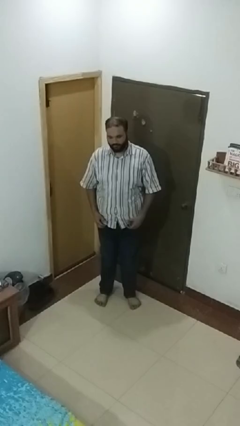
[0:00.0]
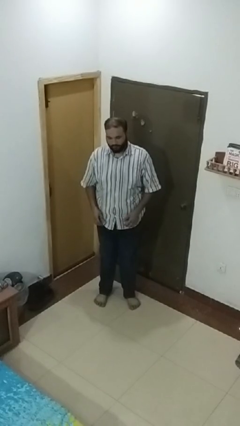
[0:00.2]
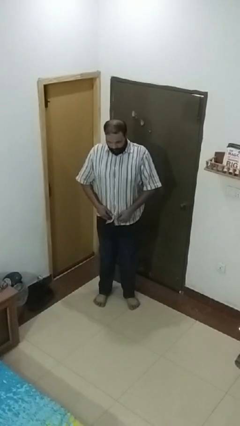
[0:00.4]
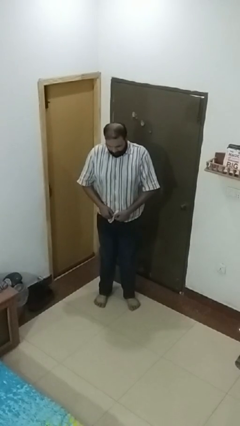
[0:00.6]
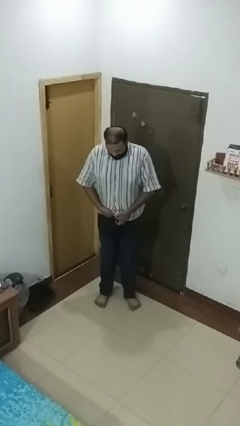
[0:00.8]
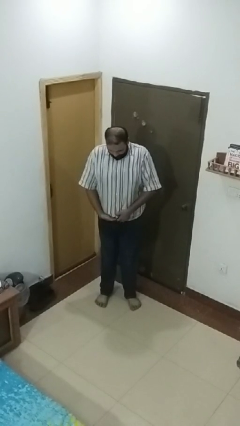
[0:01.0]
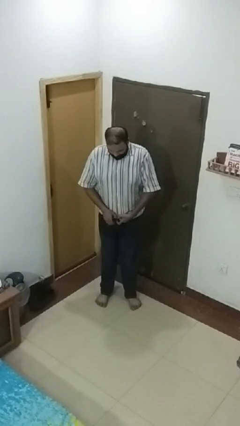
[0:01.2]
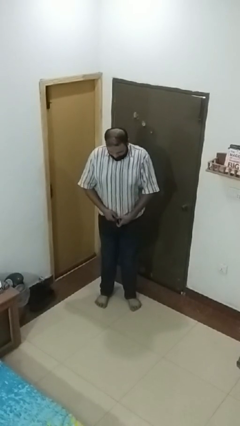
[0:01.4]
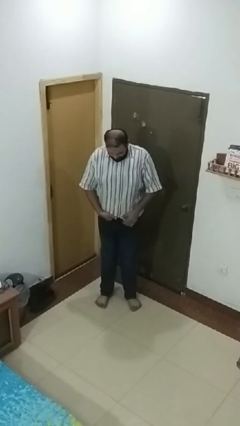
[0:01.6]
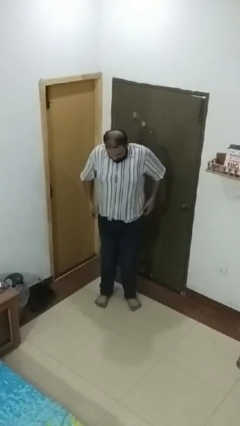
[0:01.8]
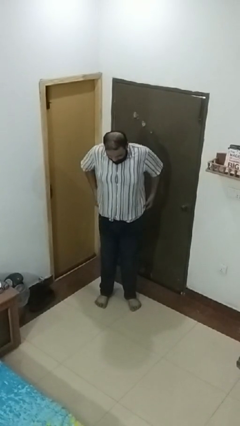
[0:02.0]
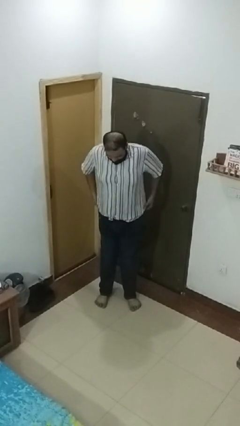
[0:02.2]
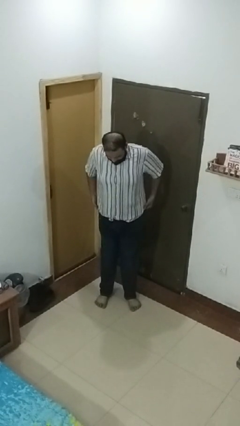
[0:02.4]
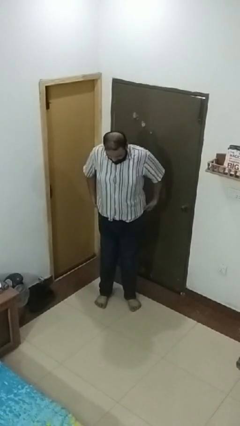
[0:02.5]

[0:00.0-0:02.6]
person tucks in shirt

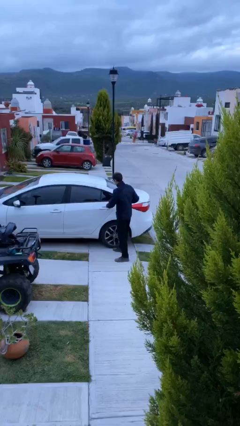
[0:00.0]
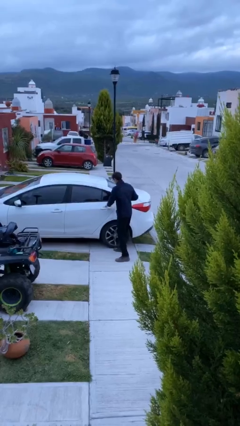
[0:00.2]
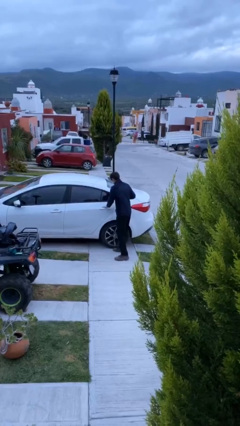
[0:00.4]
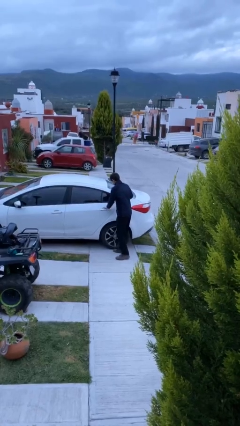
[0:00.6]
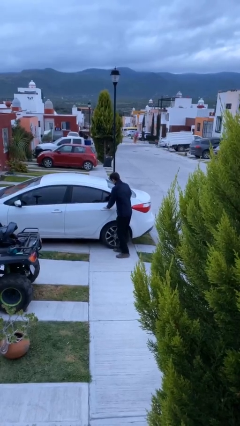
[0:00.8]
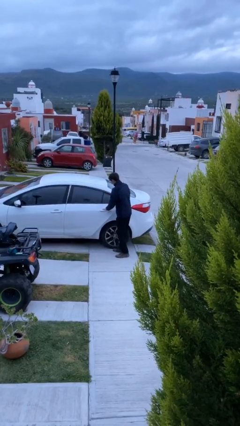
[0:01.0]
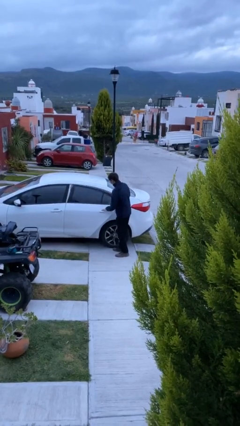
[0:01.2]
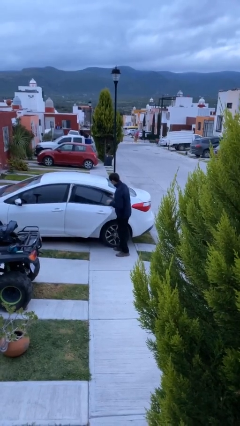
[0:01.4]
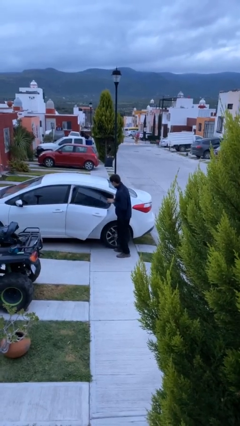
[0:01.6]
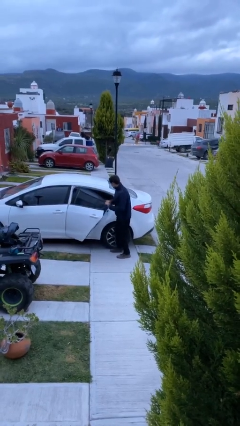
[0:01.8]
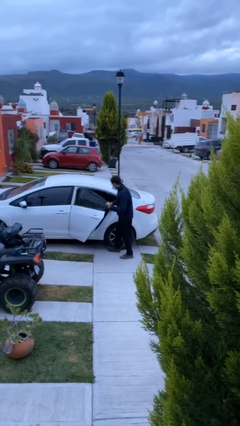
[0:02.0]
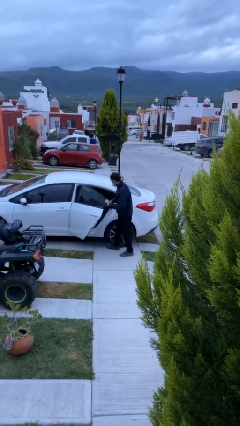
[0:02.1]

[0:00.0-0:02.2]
person opens car door

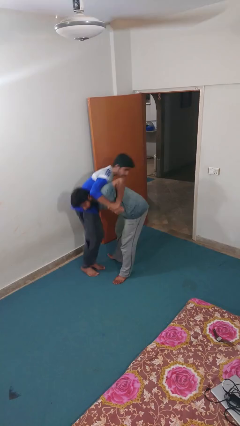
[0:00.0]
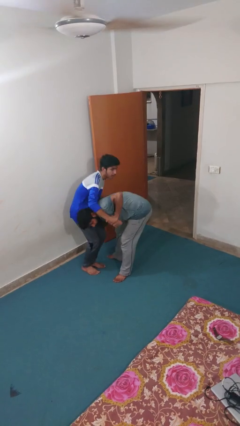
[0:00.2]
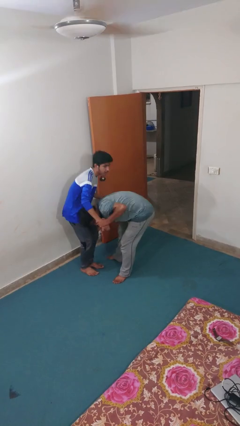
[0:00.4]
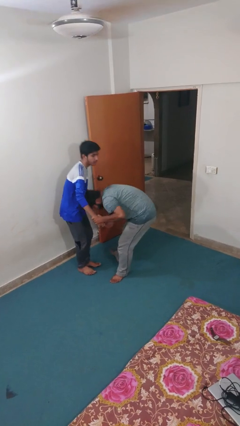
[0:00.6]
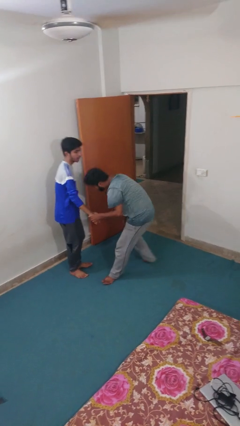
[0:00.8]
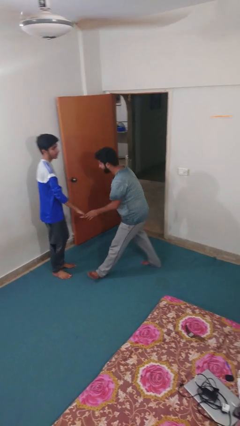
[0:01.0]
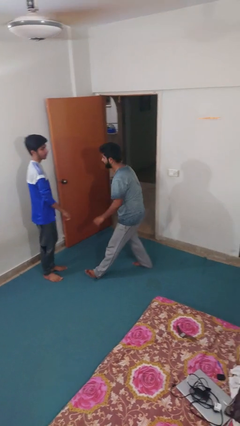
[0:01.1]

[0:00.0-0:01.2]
person puts down person

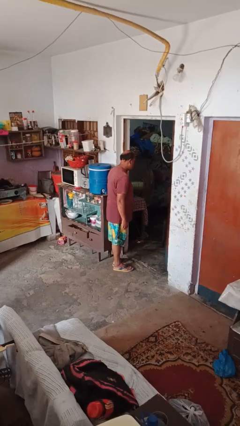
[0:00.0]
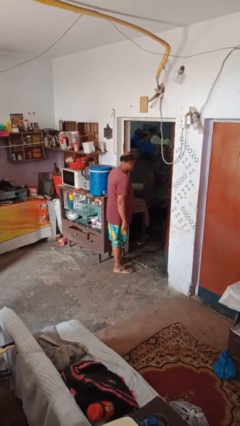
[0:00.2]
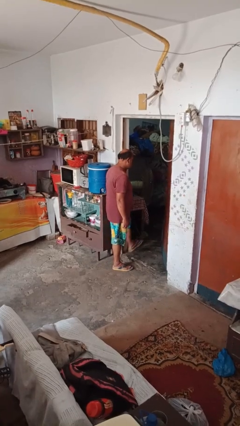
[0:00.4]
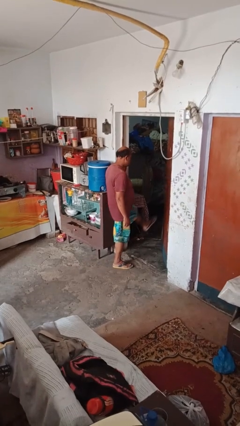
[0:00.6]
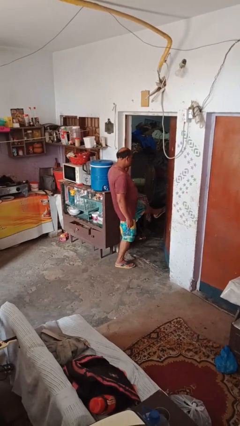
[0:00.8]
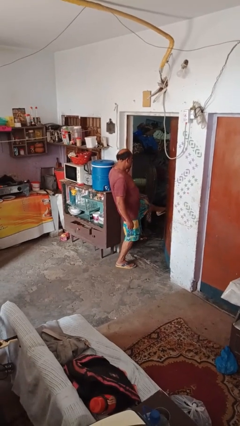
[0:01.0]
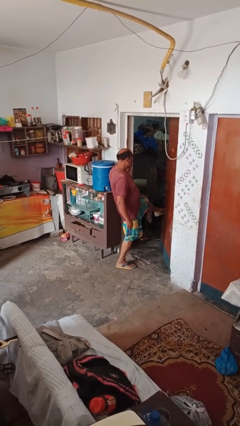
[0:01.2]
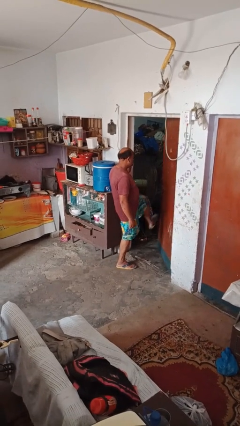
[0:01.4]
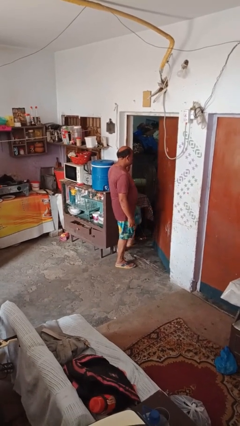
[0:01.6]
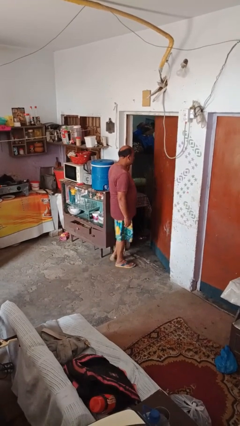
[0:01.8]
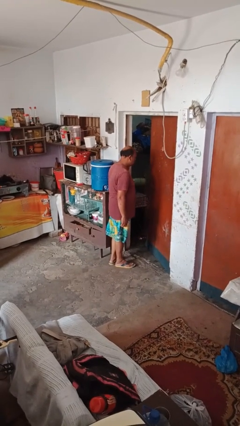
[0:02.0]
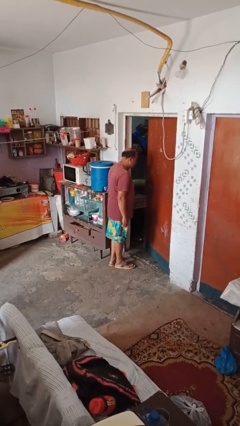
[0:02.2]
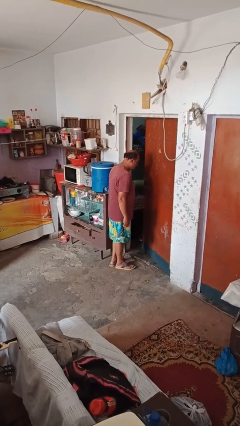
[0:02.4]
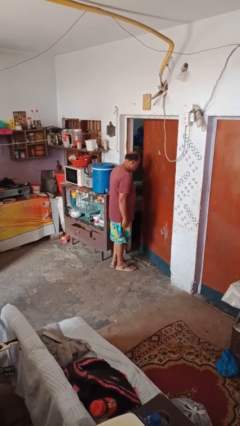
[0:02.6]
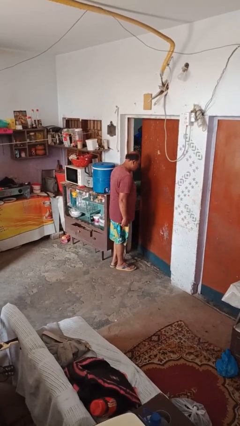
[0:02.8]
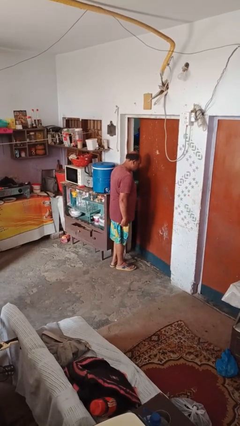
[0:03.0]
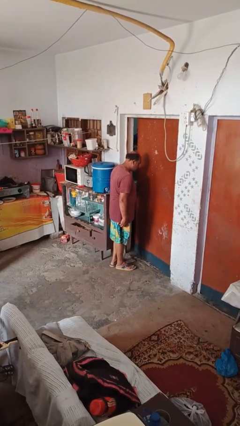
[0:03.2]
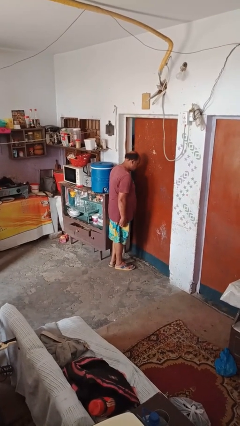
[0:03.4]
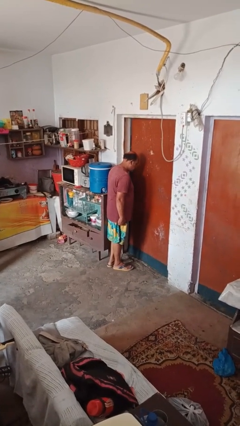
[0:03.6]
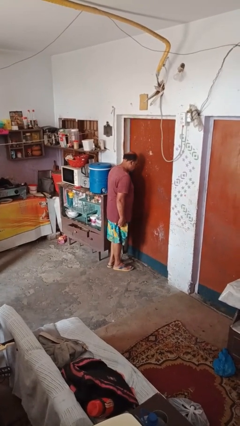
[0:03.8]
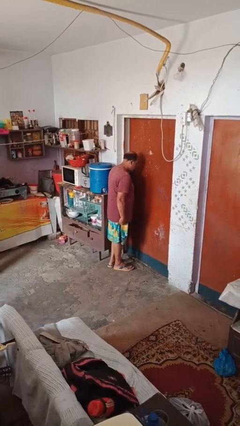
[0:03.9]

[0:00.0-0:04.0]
person closes door with foot

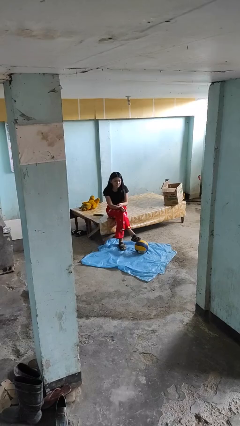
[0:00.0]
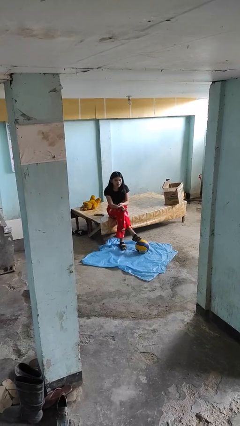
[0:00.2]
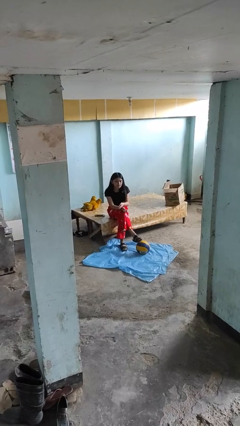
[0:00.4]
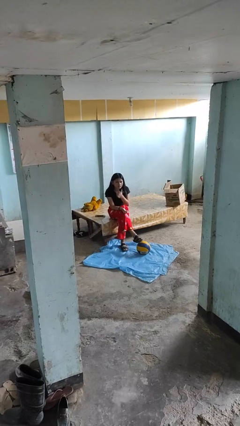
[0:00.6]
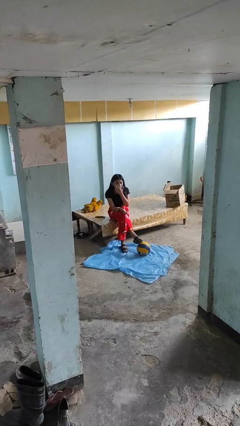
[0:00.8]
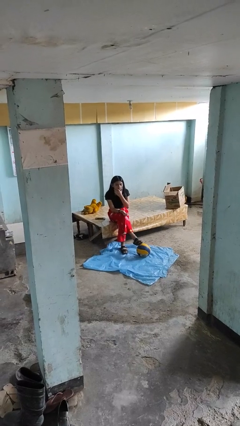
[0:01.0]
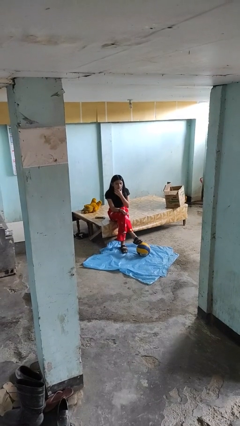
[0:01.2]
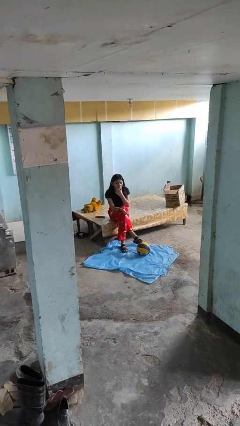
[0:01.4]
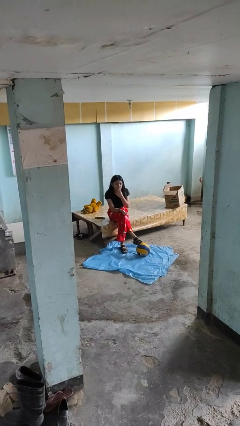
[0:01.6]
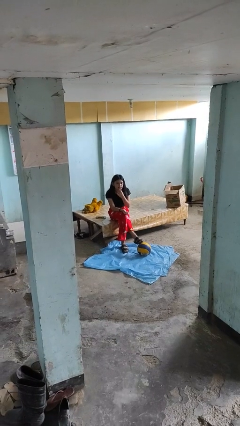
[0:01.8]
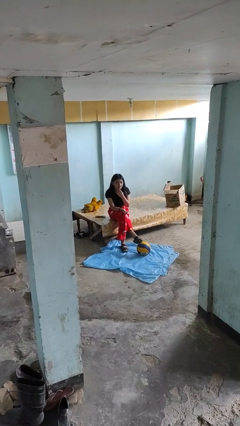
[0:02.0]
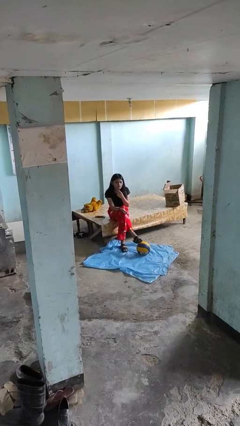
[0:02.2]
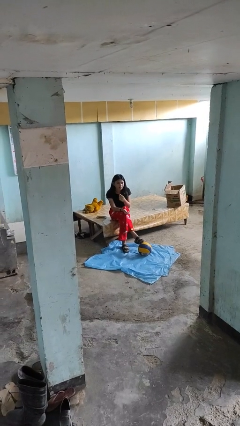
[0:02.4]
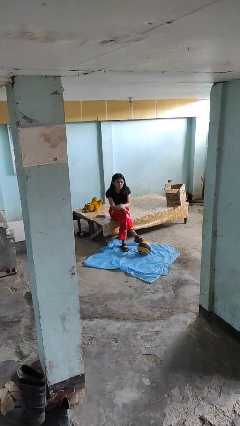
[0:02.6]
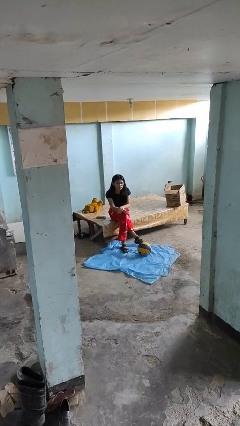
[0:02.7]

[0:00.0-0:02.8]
person strokes chin

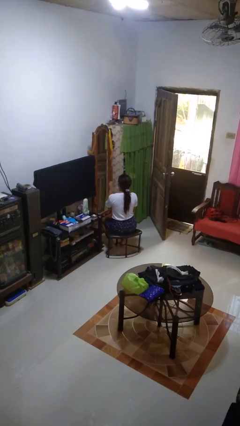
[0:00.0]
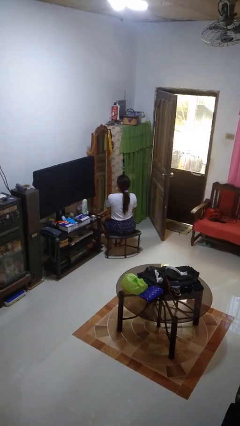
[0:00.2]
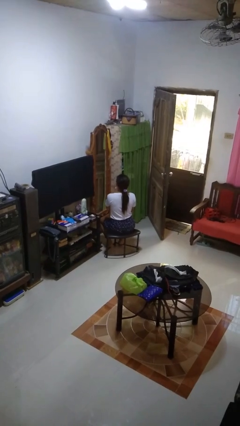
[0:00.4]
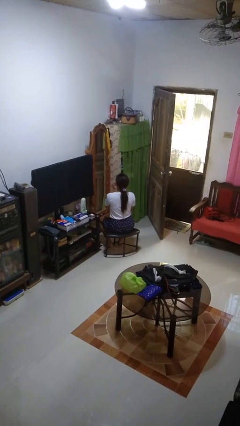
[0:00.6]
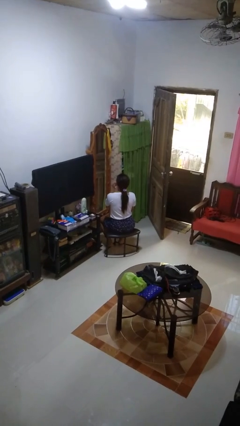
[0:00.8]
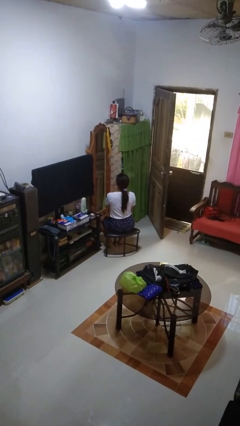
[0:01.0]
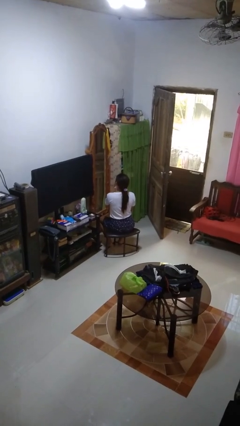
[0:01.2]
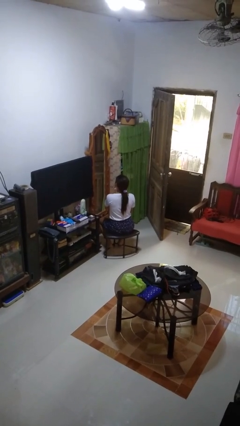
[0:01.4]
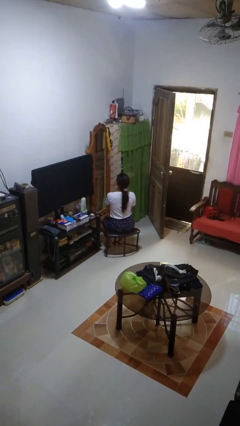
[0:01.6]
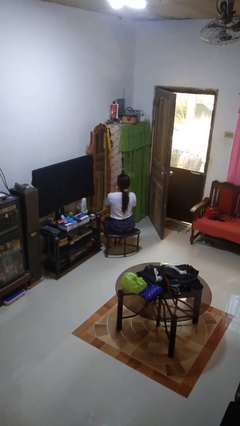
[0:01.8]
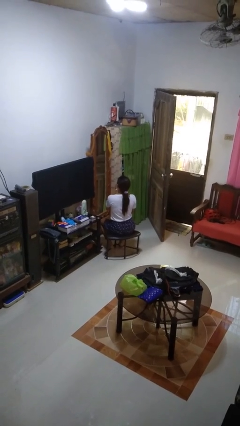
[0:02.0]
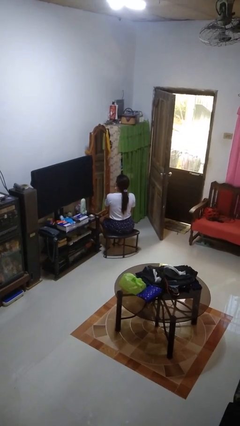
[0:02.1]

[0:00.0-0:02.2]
person applies lip makeup

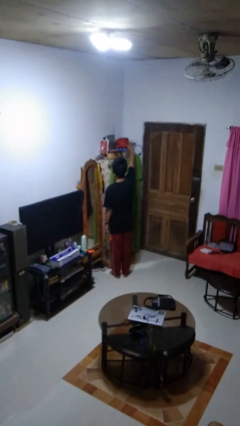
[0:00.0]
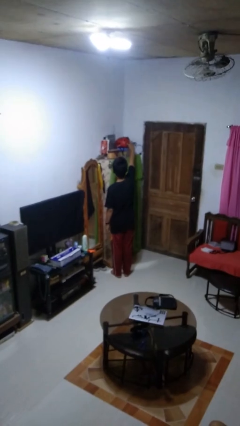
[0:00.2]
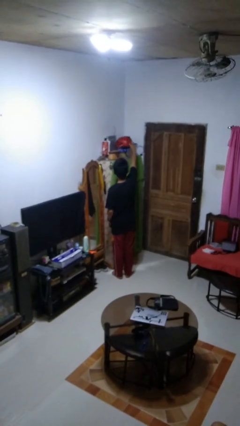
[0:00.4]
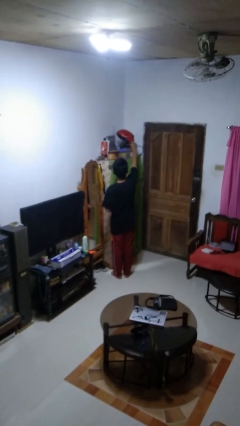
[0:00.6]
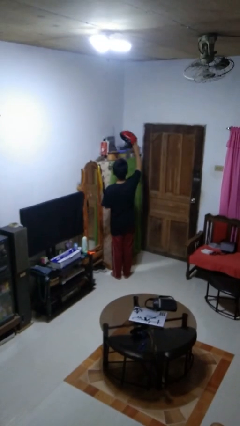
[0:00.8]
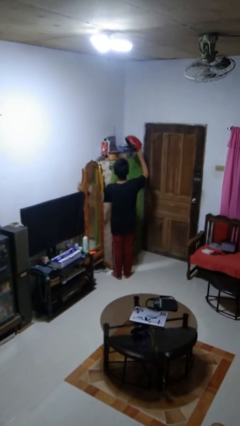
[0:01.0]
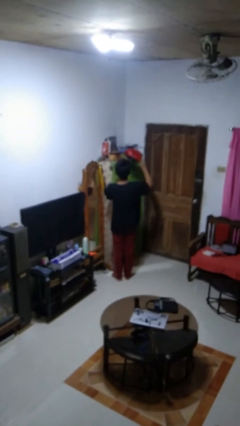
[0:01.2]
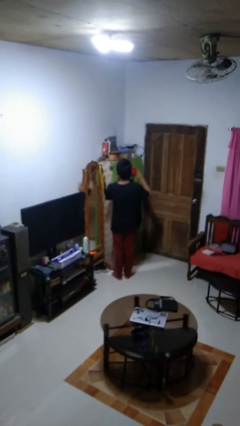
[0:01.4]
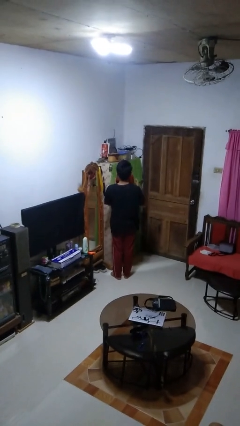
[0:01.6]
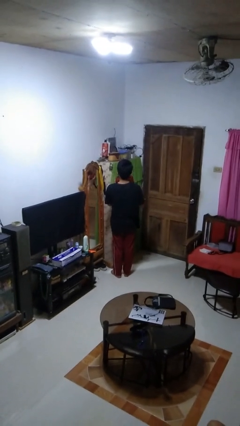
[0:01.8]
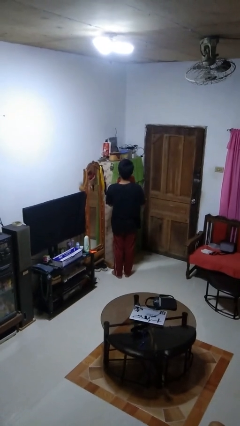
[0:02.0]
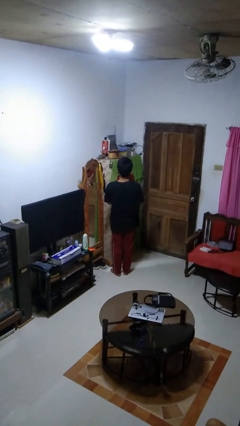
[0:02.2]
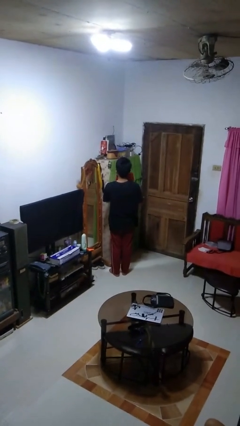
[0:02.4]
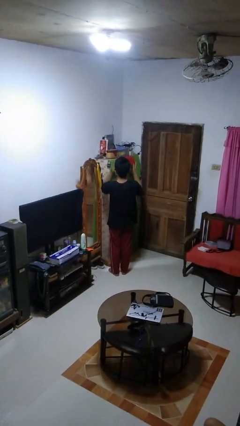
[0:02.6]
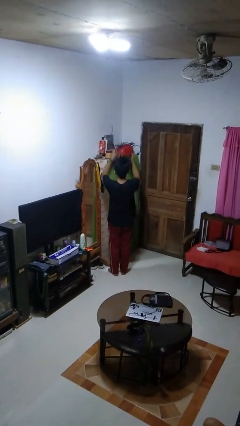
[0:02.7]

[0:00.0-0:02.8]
person picks up object from shelf
